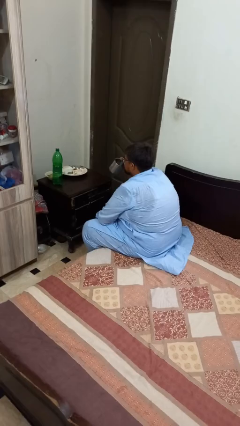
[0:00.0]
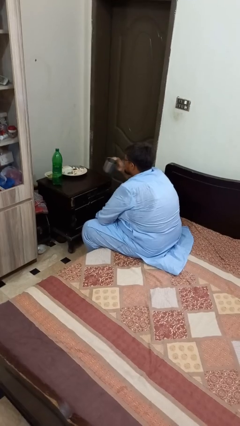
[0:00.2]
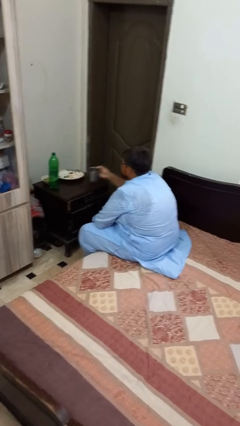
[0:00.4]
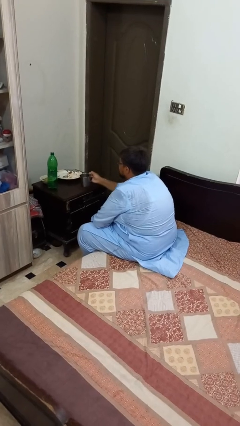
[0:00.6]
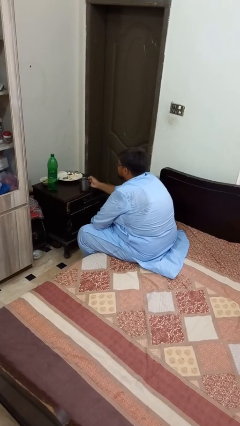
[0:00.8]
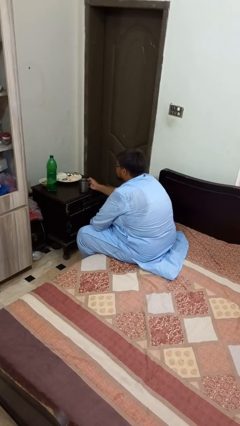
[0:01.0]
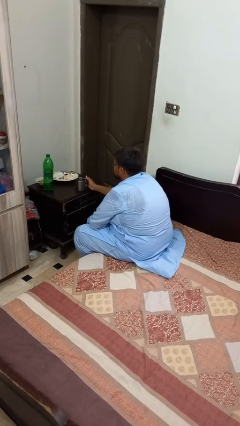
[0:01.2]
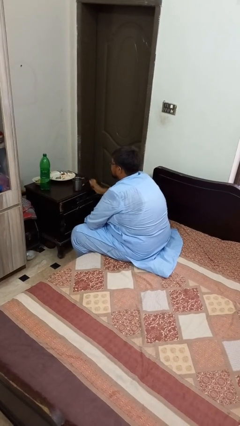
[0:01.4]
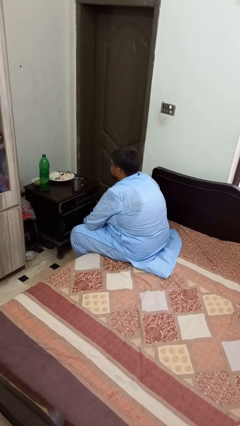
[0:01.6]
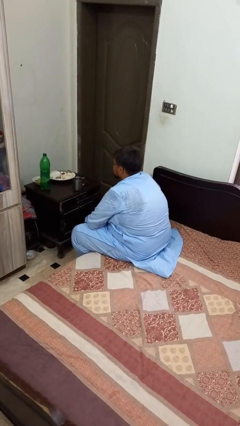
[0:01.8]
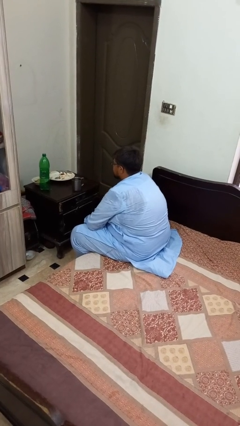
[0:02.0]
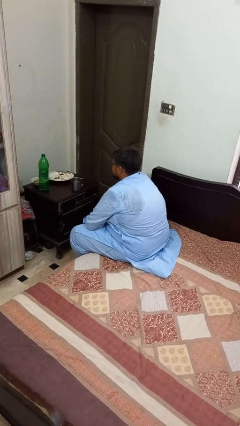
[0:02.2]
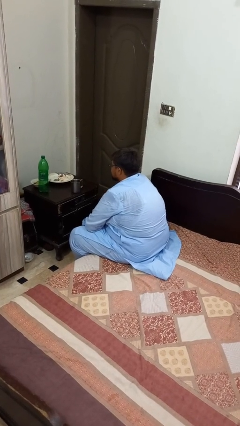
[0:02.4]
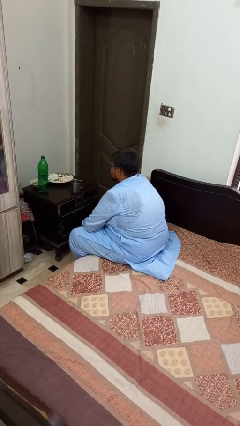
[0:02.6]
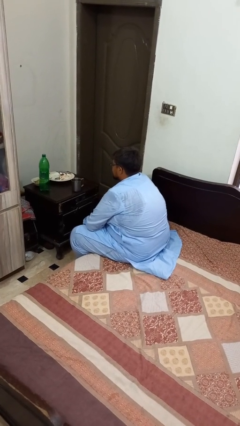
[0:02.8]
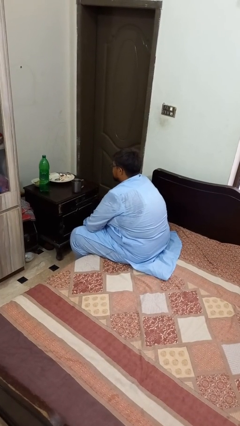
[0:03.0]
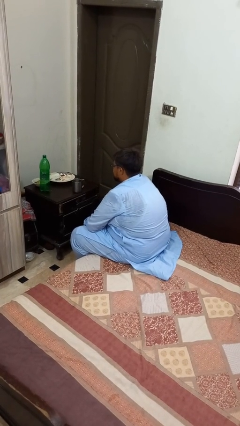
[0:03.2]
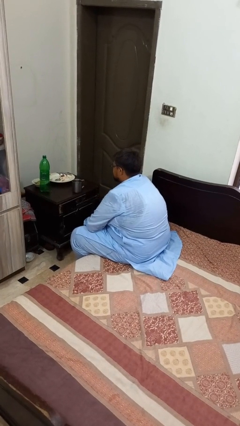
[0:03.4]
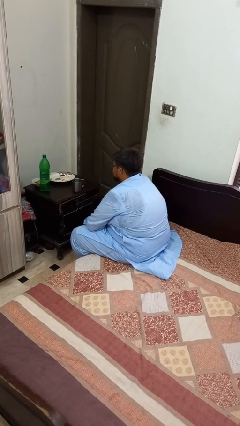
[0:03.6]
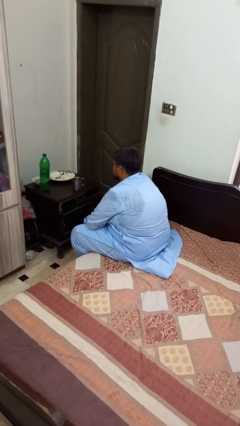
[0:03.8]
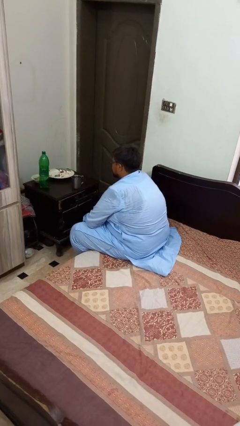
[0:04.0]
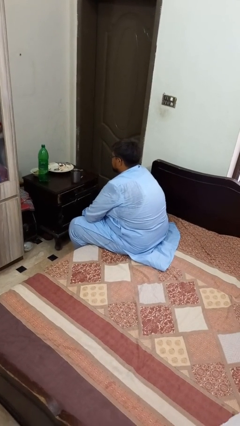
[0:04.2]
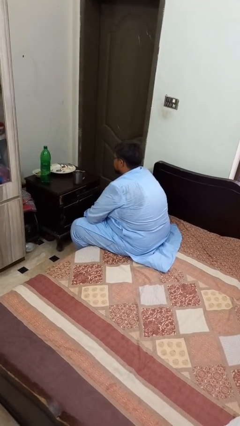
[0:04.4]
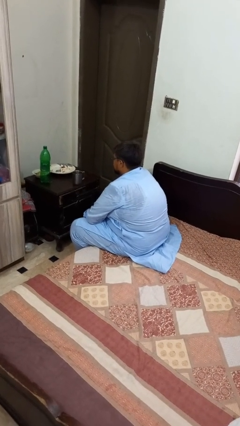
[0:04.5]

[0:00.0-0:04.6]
person puts down object on table

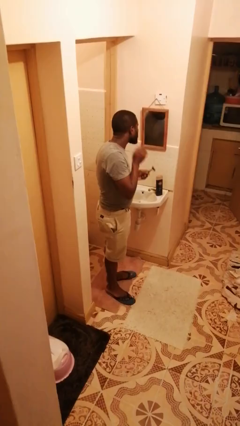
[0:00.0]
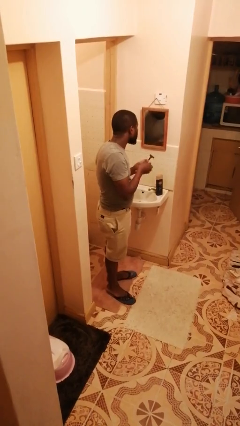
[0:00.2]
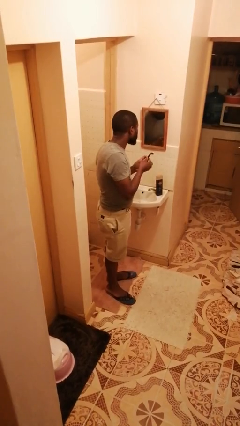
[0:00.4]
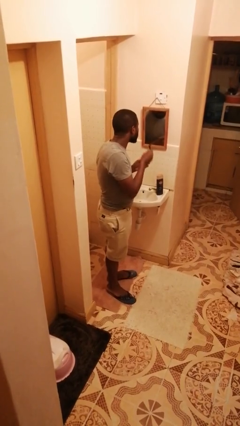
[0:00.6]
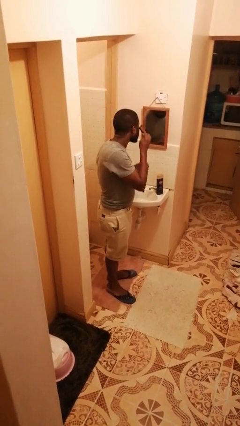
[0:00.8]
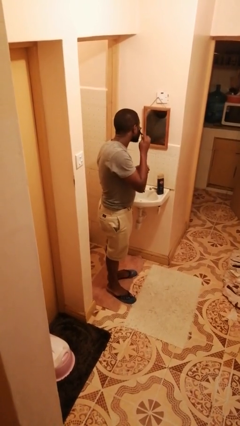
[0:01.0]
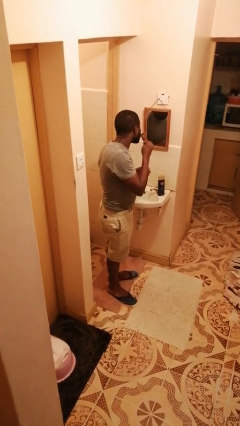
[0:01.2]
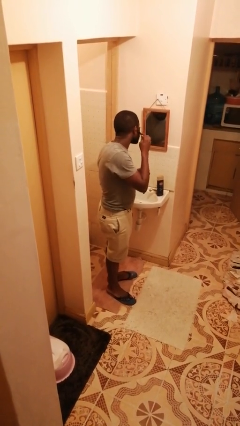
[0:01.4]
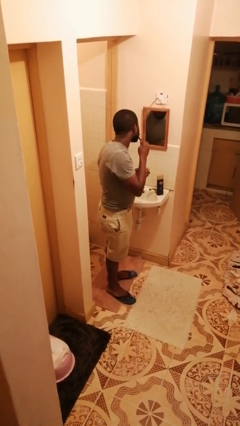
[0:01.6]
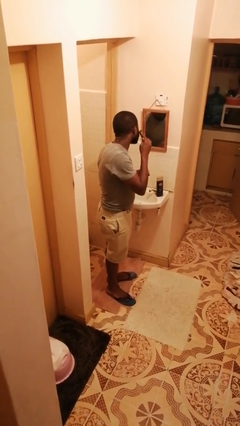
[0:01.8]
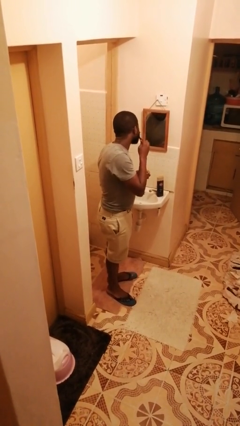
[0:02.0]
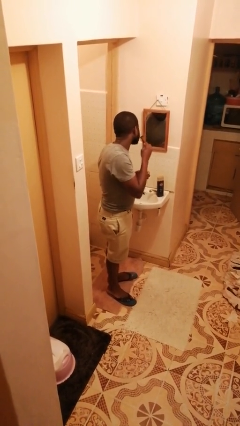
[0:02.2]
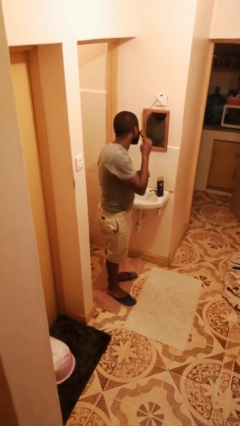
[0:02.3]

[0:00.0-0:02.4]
person shaves face

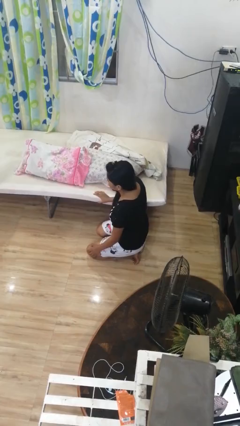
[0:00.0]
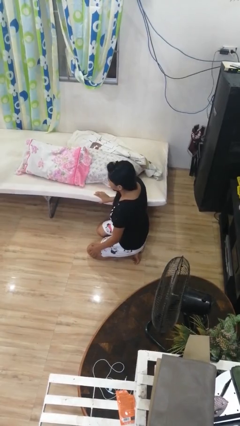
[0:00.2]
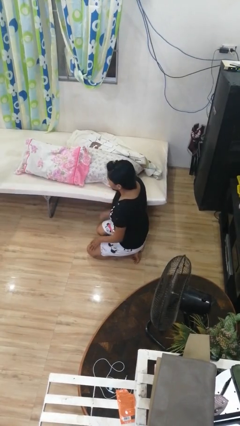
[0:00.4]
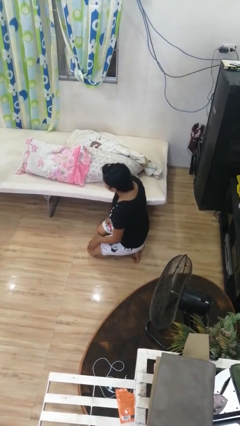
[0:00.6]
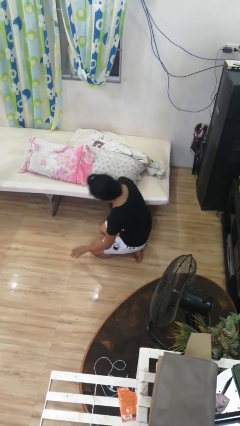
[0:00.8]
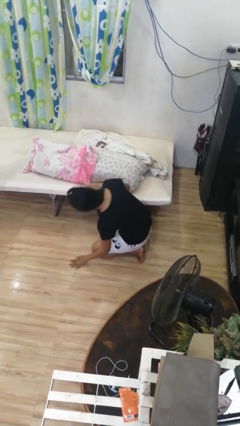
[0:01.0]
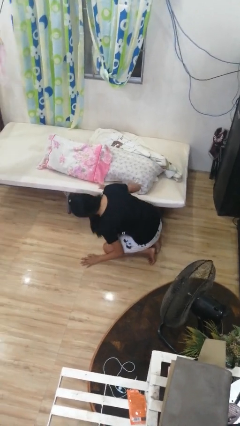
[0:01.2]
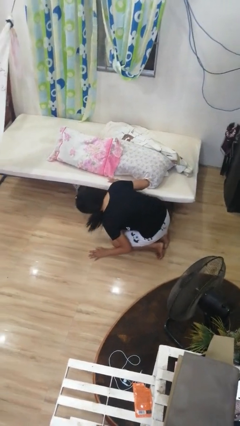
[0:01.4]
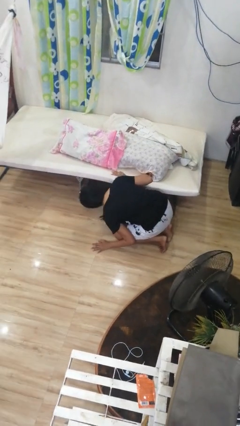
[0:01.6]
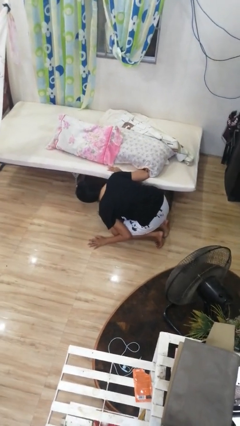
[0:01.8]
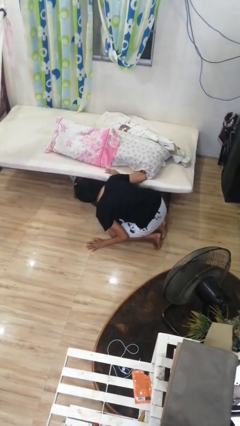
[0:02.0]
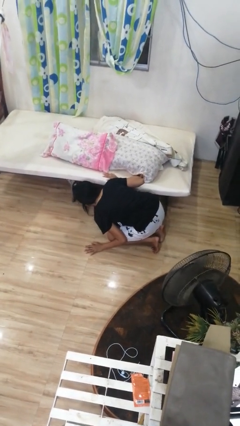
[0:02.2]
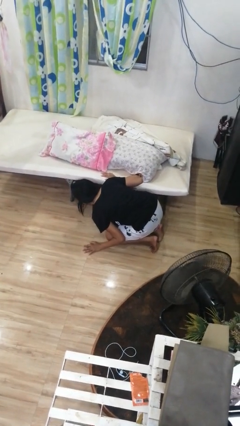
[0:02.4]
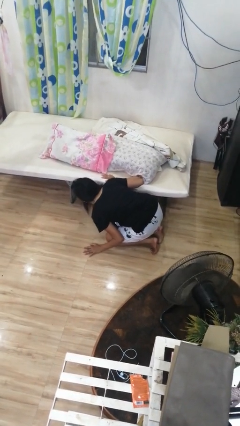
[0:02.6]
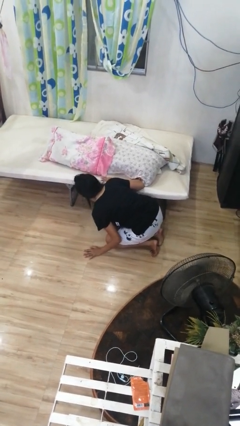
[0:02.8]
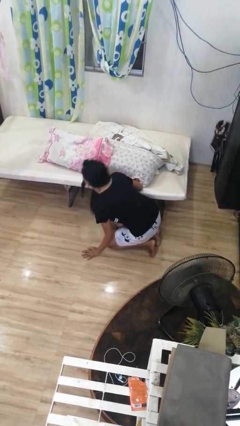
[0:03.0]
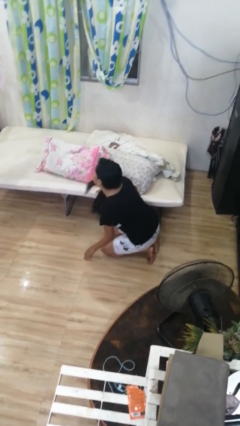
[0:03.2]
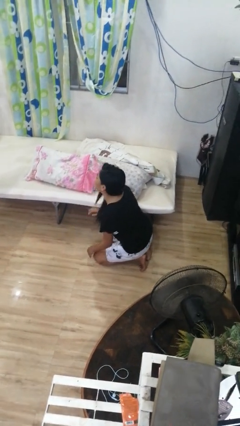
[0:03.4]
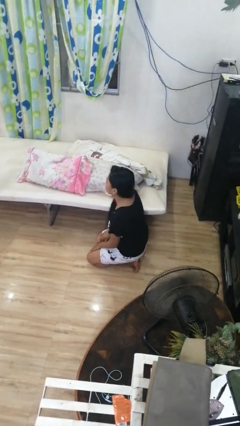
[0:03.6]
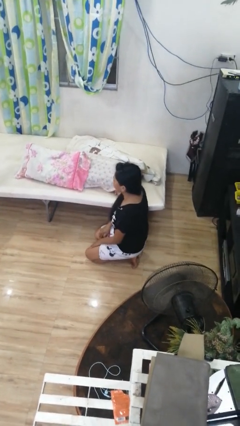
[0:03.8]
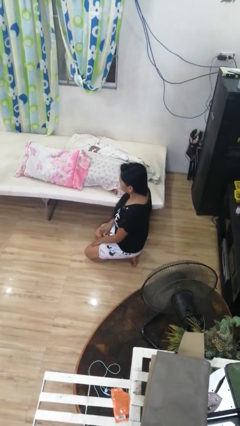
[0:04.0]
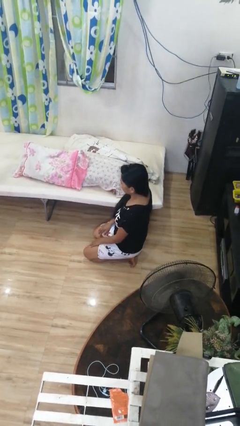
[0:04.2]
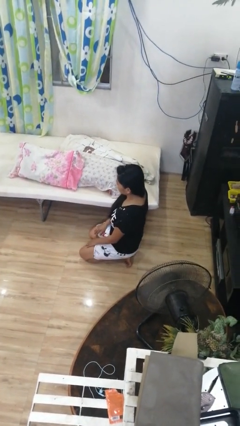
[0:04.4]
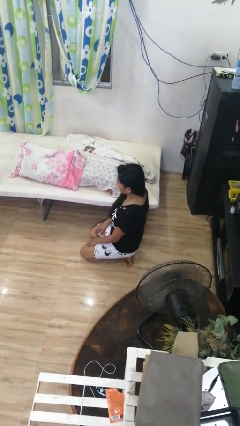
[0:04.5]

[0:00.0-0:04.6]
person searches under bed

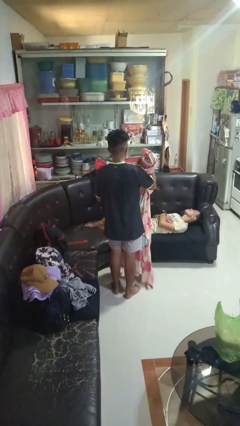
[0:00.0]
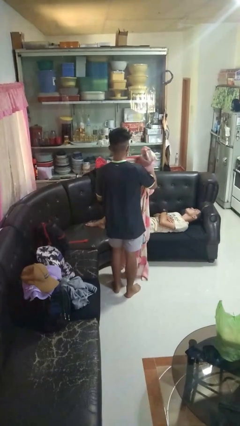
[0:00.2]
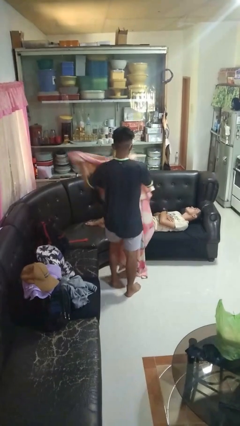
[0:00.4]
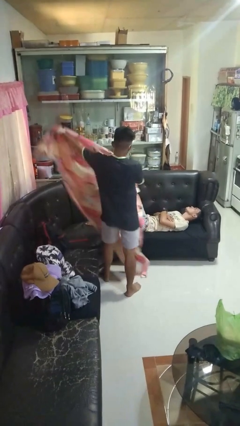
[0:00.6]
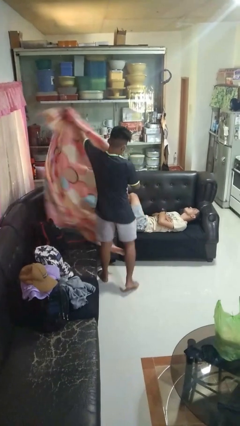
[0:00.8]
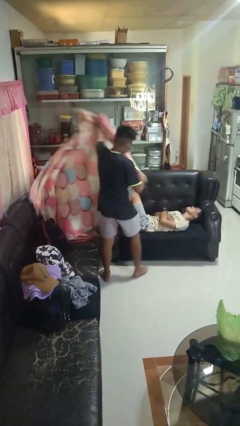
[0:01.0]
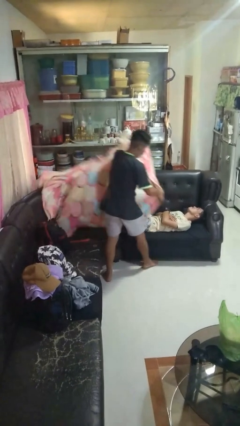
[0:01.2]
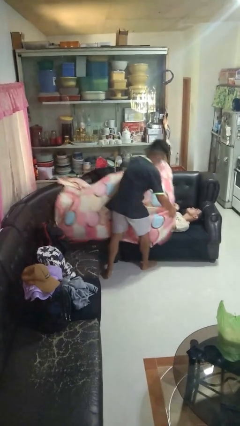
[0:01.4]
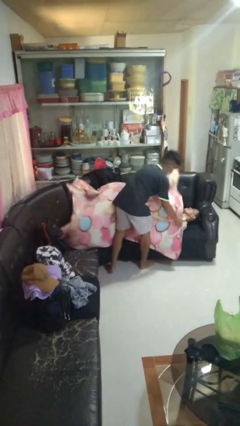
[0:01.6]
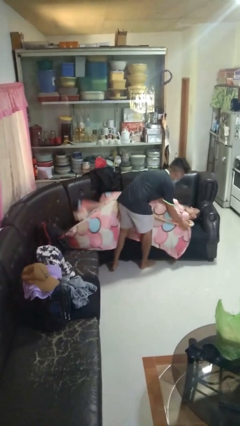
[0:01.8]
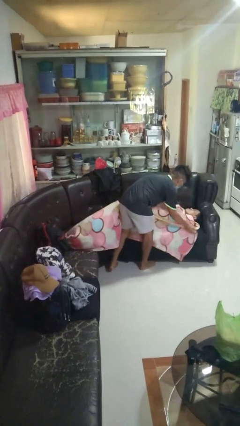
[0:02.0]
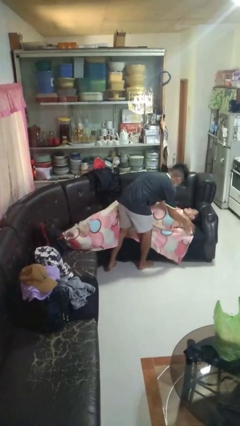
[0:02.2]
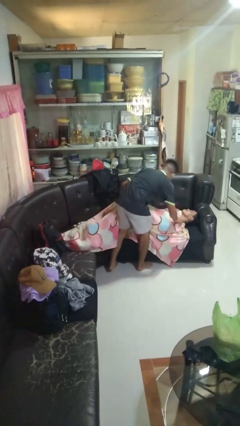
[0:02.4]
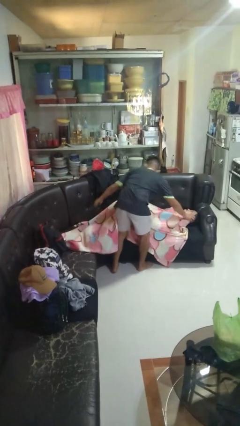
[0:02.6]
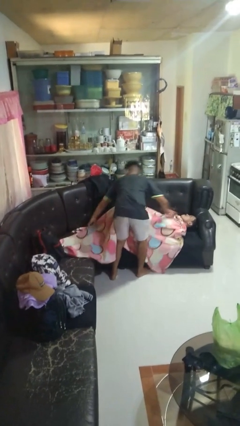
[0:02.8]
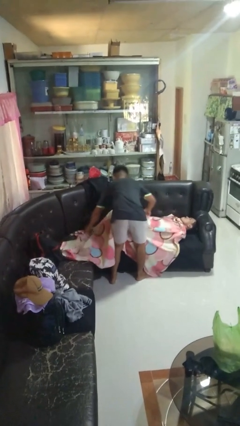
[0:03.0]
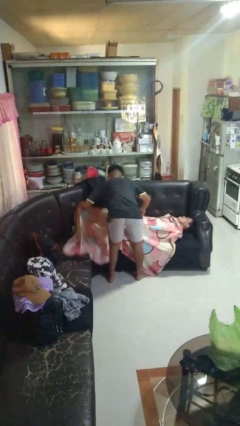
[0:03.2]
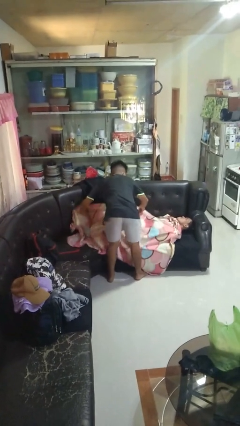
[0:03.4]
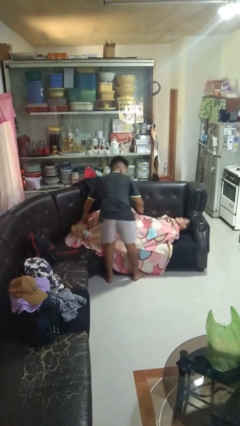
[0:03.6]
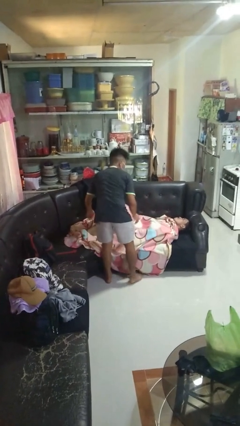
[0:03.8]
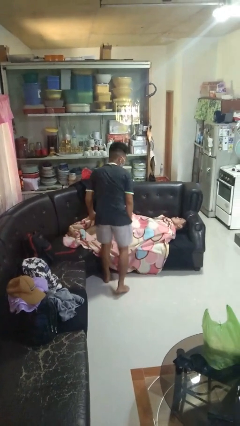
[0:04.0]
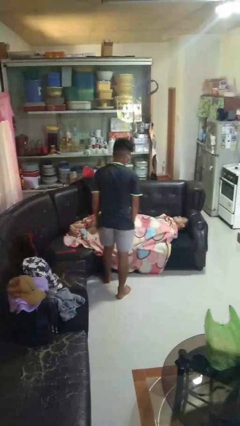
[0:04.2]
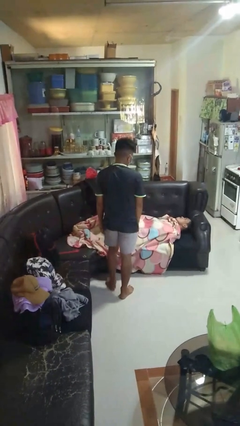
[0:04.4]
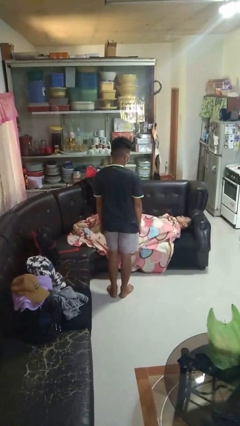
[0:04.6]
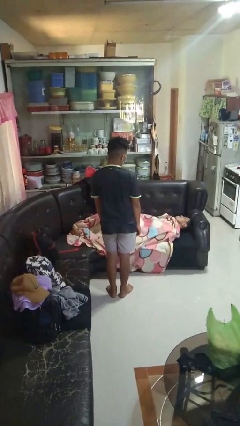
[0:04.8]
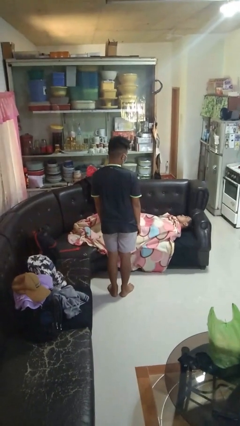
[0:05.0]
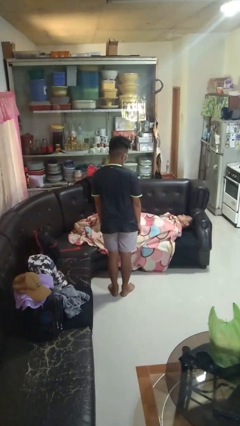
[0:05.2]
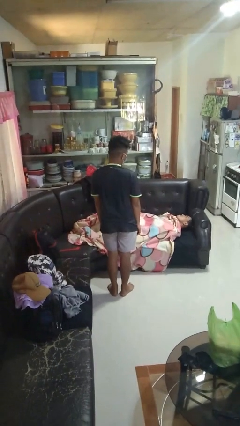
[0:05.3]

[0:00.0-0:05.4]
person covers friend with blanket

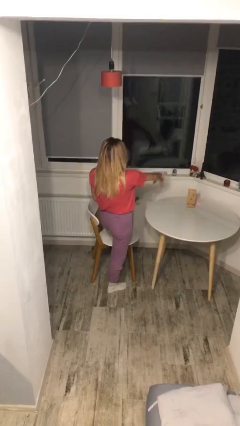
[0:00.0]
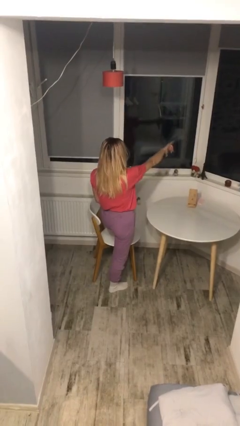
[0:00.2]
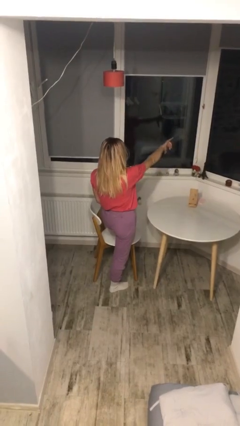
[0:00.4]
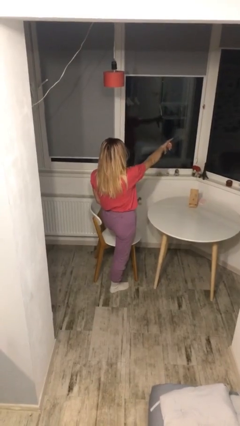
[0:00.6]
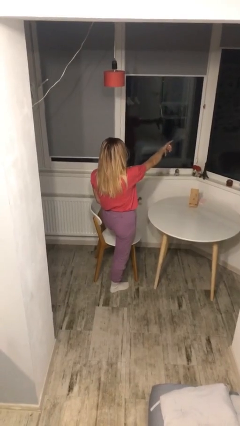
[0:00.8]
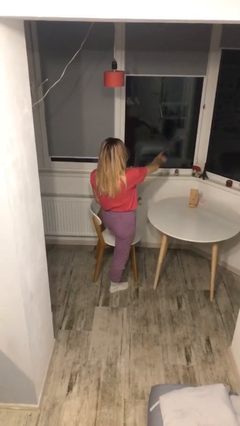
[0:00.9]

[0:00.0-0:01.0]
person gestures hang loose
